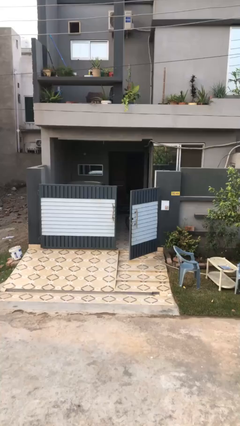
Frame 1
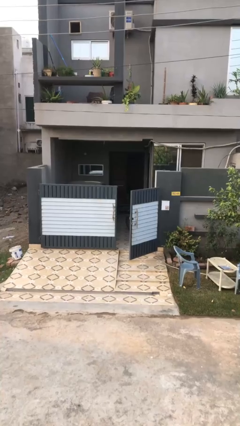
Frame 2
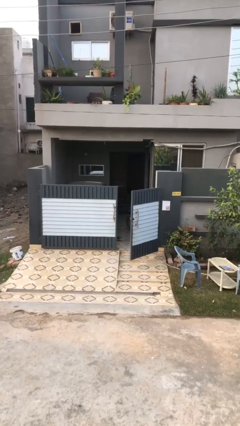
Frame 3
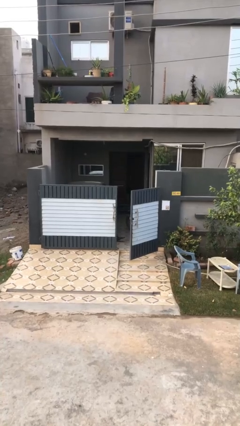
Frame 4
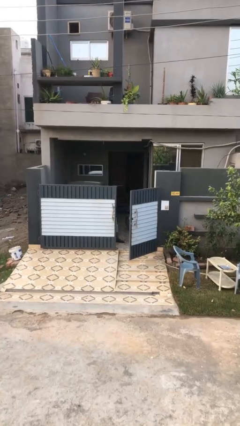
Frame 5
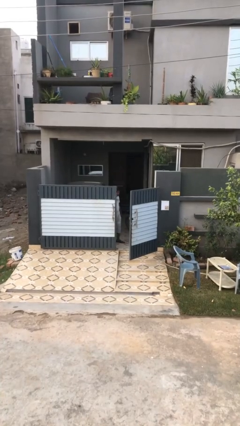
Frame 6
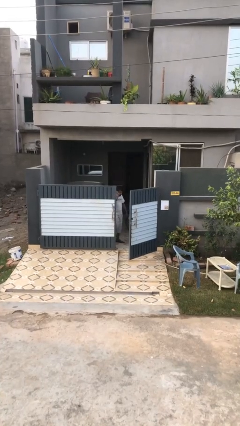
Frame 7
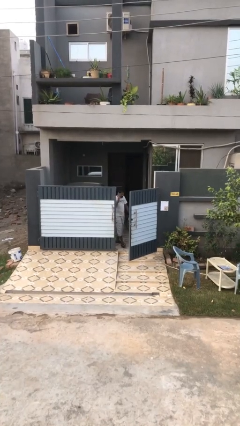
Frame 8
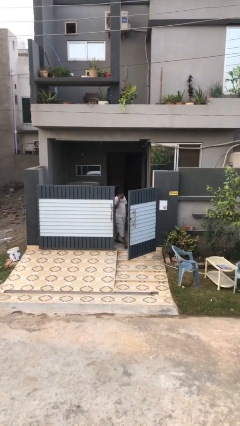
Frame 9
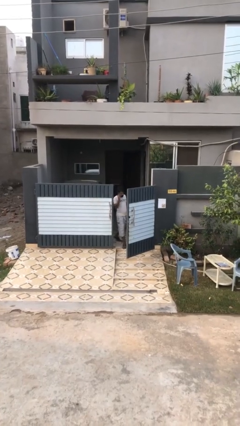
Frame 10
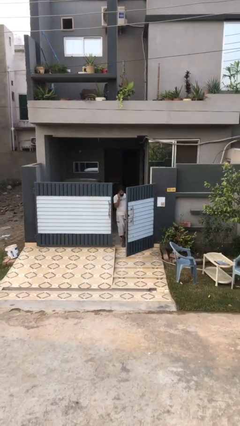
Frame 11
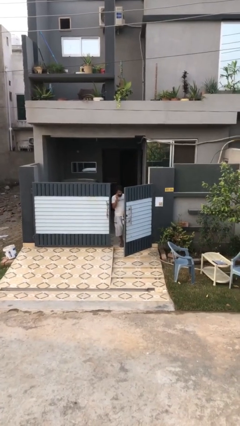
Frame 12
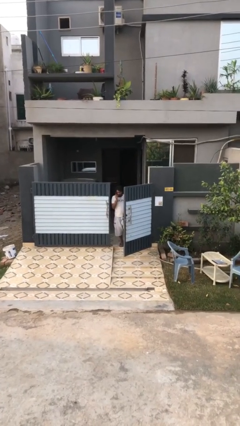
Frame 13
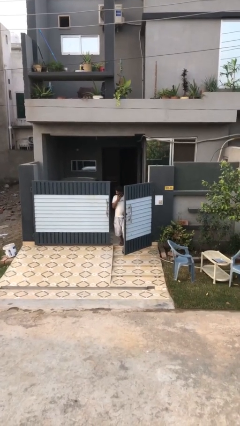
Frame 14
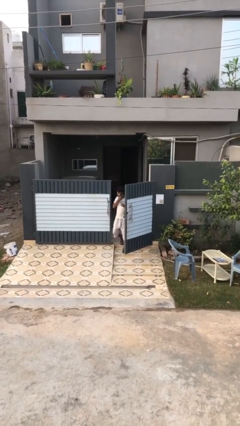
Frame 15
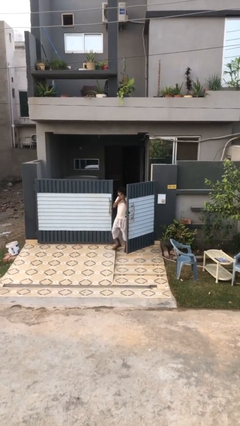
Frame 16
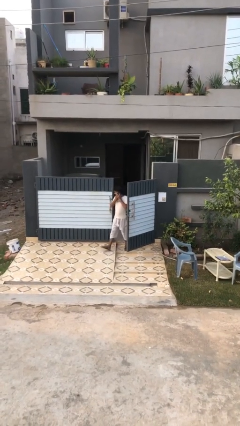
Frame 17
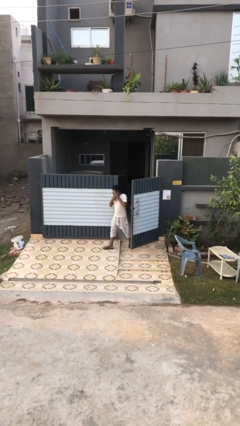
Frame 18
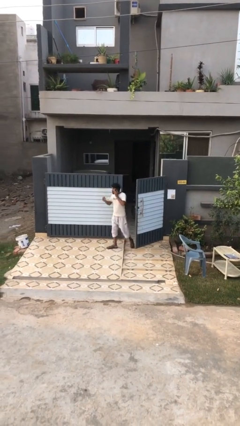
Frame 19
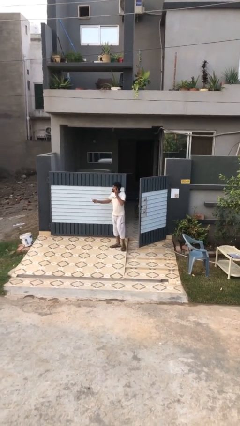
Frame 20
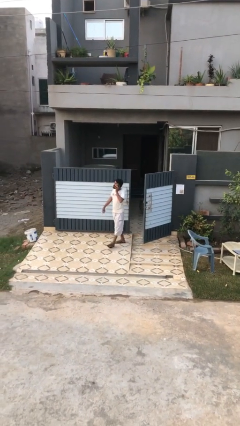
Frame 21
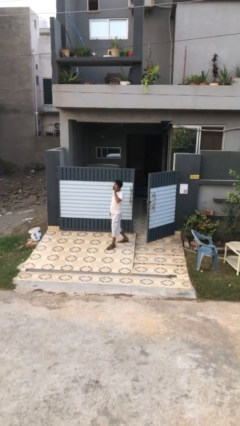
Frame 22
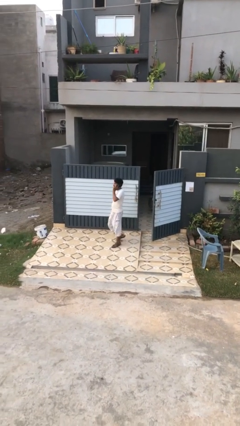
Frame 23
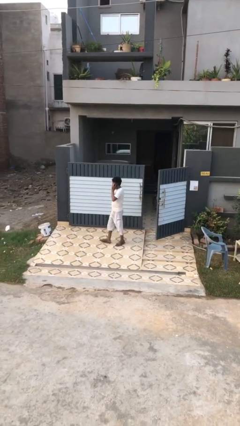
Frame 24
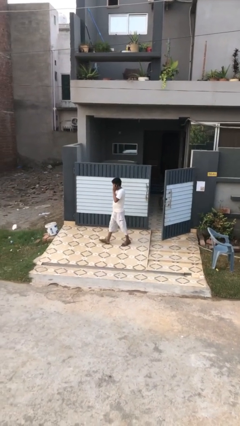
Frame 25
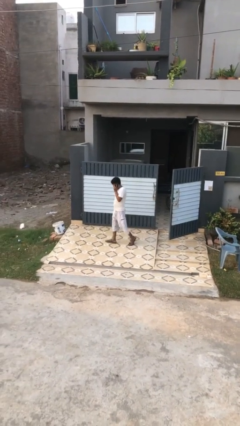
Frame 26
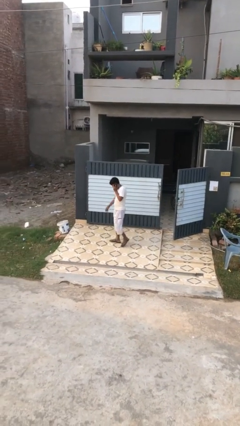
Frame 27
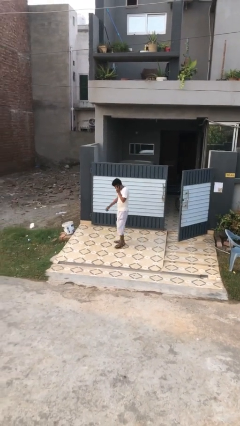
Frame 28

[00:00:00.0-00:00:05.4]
person enters scene through structure

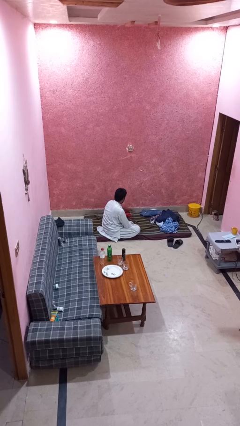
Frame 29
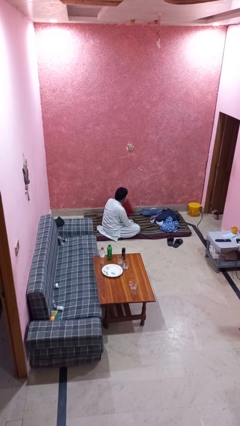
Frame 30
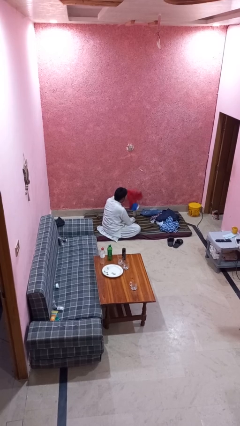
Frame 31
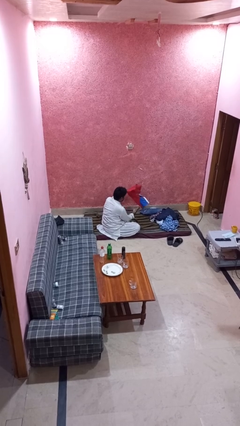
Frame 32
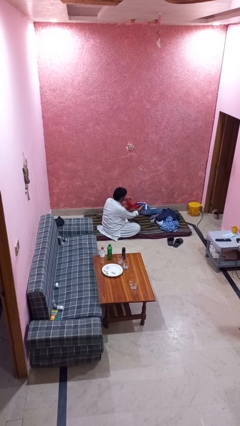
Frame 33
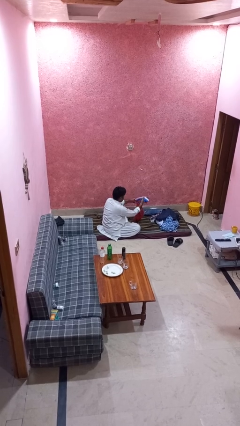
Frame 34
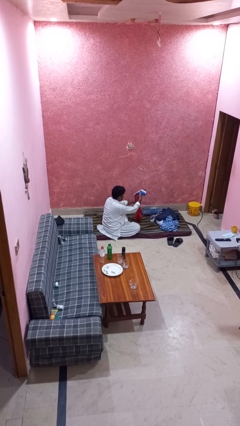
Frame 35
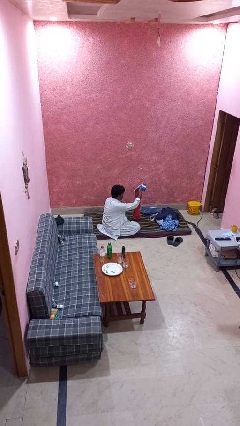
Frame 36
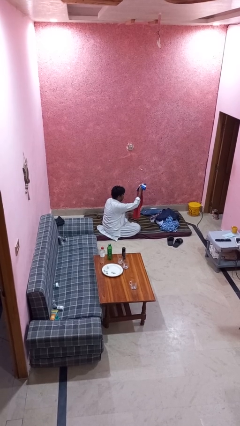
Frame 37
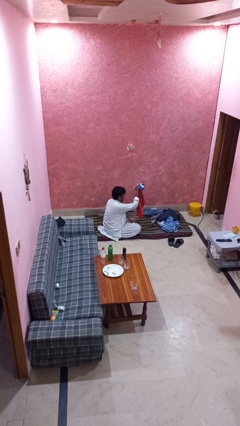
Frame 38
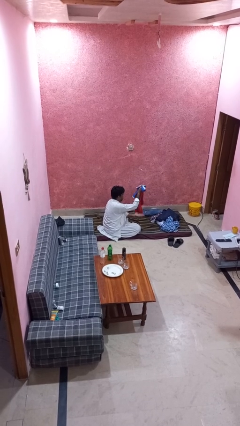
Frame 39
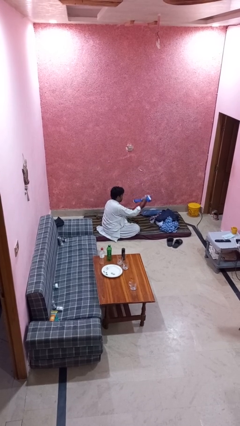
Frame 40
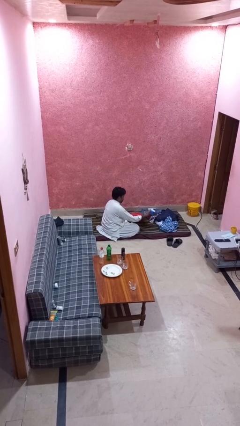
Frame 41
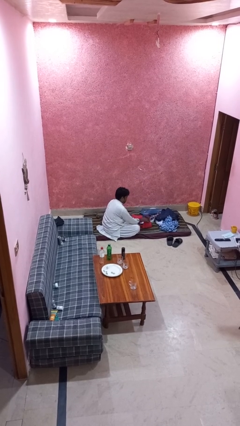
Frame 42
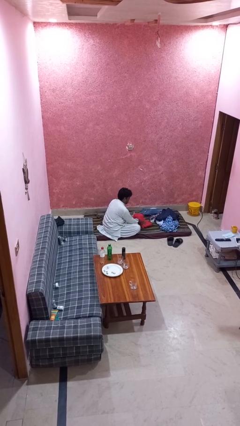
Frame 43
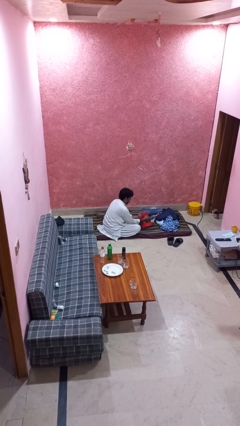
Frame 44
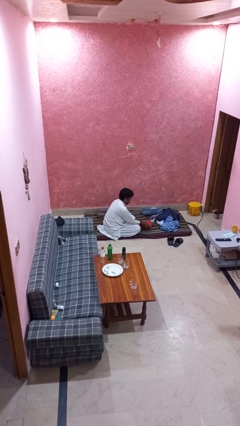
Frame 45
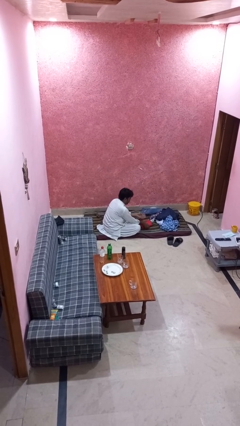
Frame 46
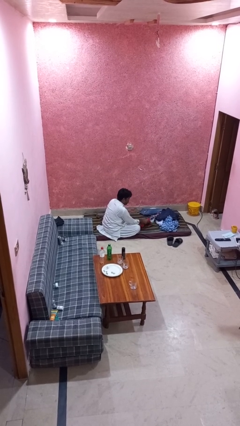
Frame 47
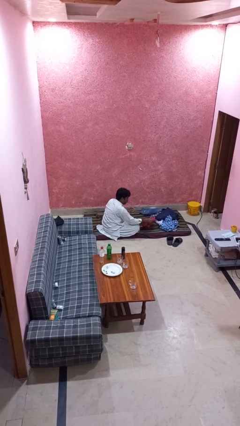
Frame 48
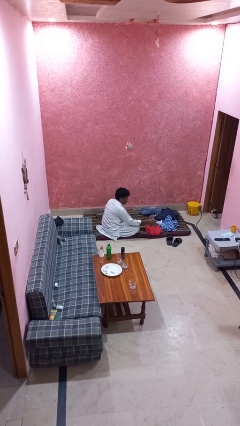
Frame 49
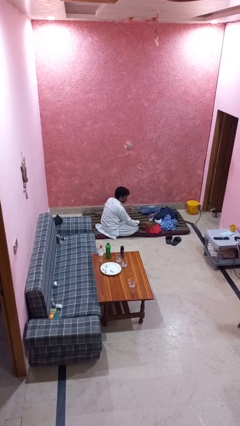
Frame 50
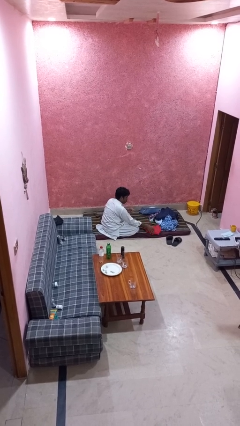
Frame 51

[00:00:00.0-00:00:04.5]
person folds shirt

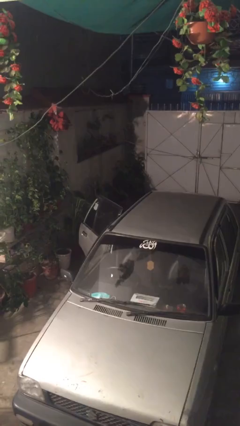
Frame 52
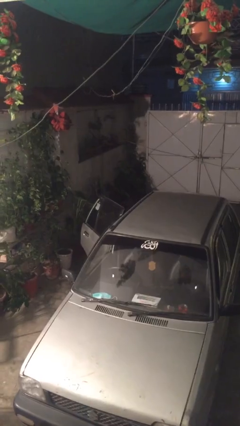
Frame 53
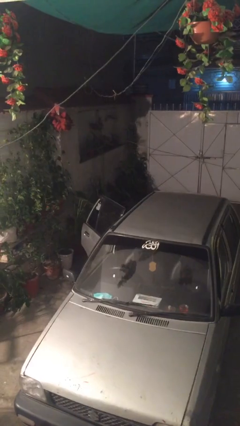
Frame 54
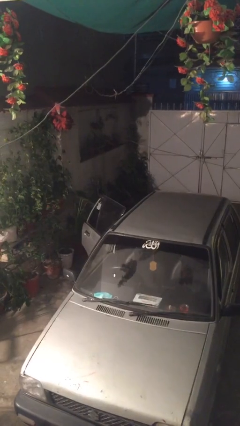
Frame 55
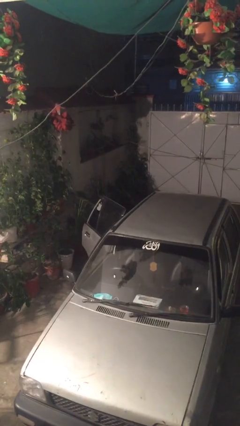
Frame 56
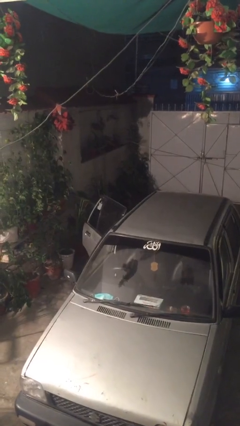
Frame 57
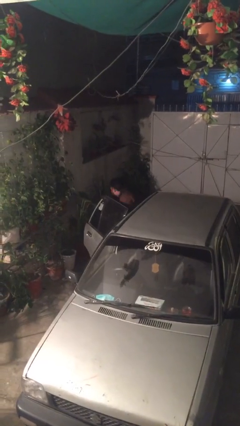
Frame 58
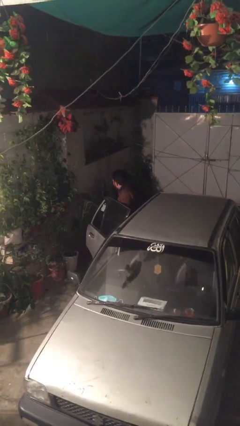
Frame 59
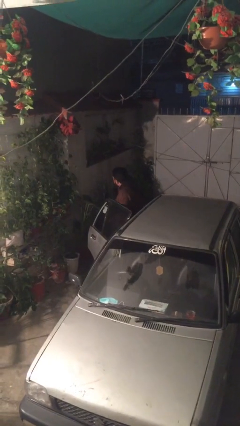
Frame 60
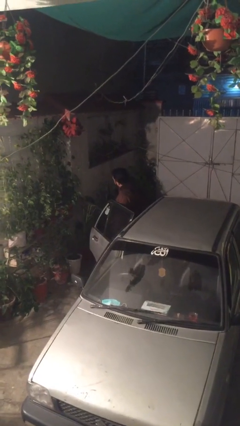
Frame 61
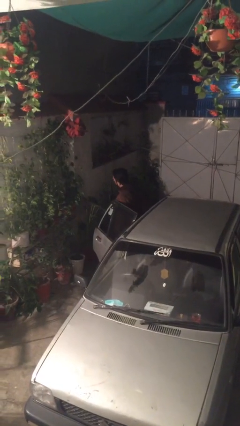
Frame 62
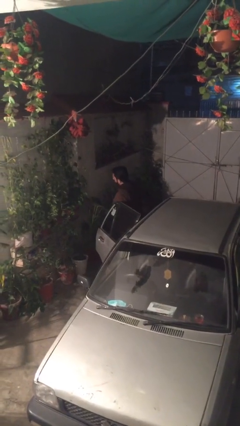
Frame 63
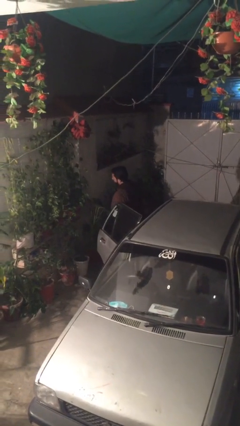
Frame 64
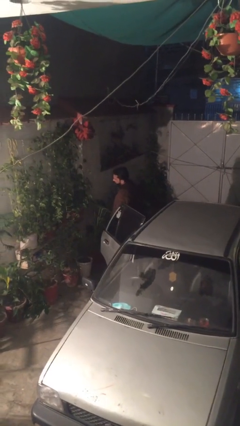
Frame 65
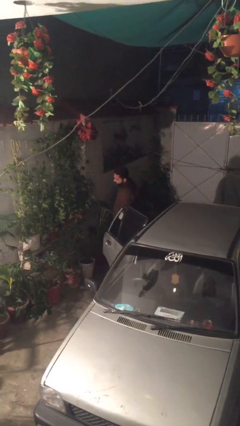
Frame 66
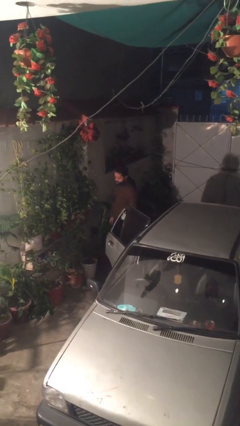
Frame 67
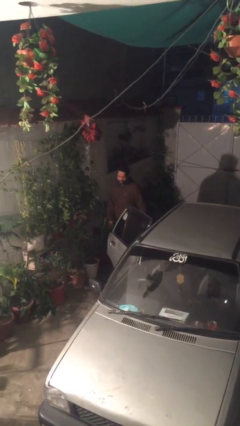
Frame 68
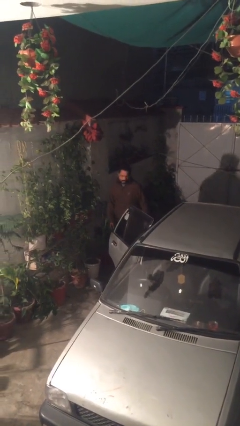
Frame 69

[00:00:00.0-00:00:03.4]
person exits car

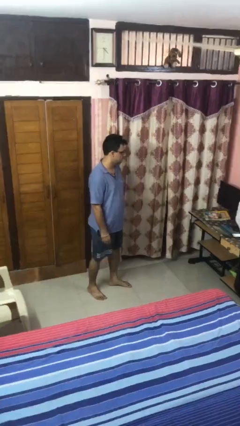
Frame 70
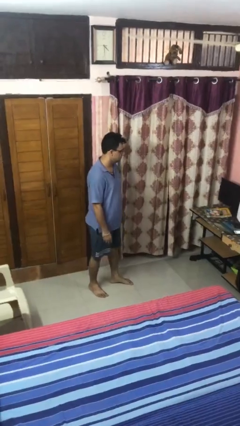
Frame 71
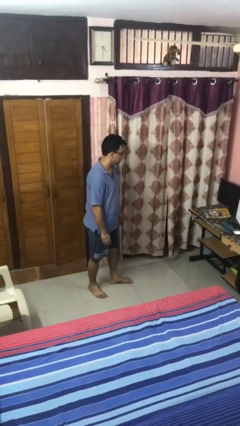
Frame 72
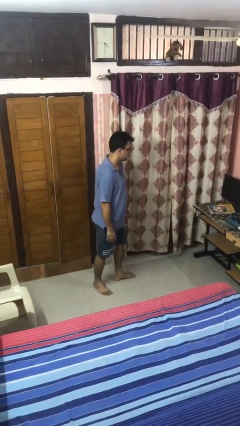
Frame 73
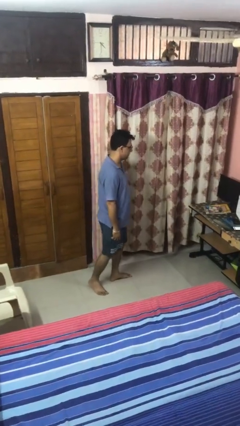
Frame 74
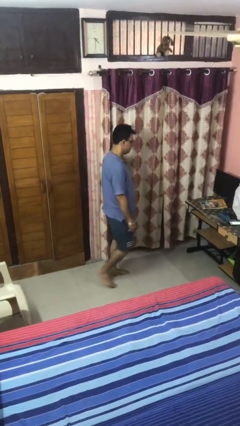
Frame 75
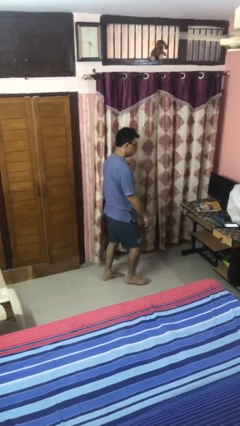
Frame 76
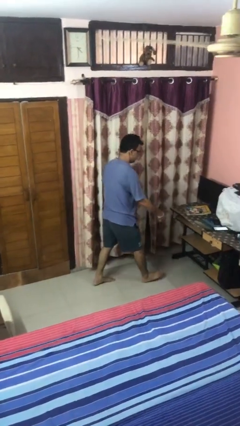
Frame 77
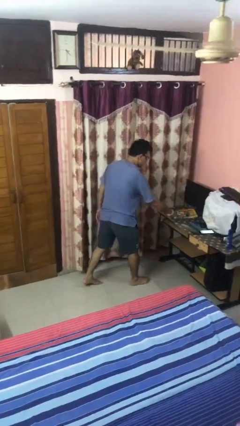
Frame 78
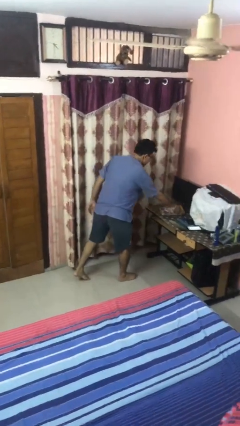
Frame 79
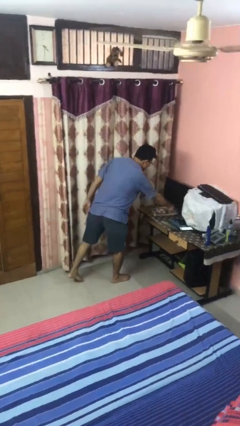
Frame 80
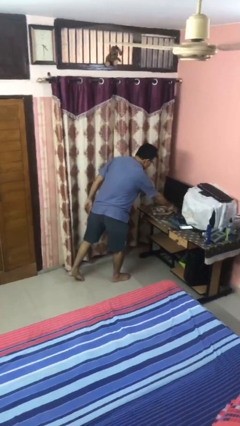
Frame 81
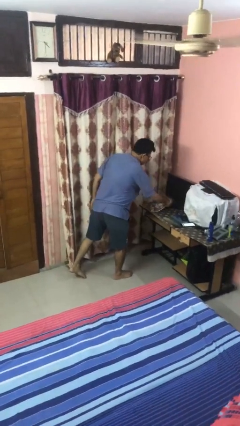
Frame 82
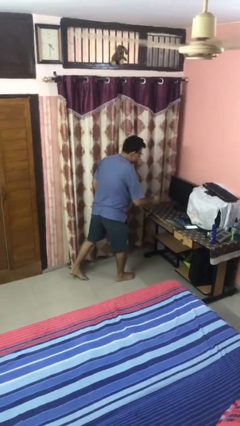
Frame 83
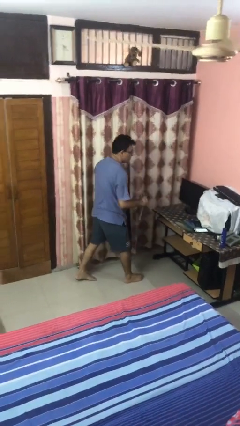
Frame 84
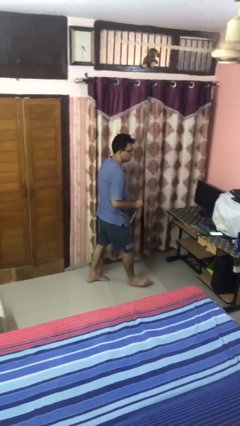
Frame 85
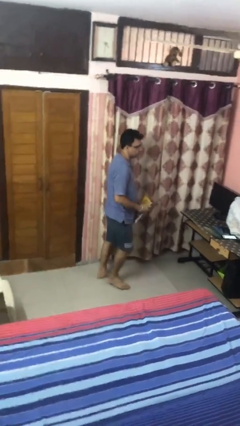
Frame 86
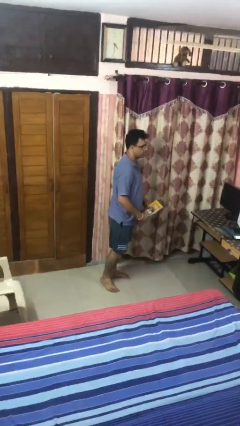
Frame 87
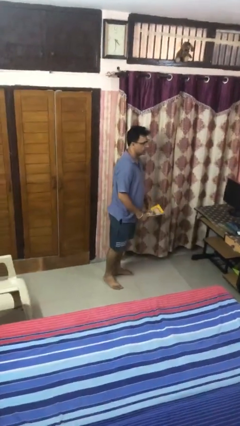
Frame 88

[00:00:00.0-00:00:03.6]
person picks up object from table

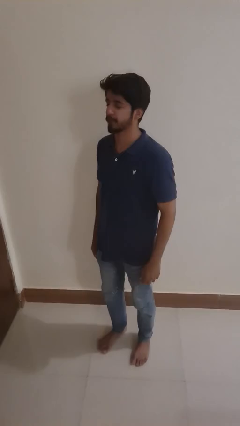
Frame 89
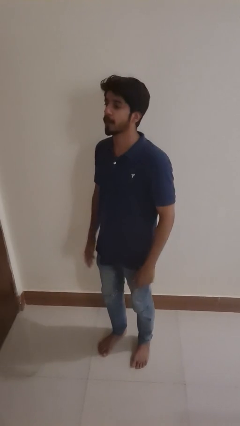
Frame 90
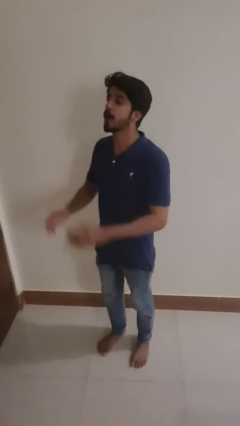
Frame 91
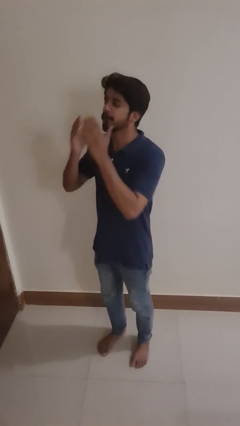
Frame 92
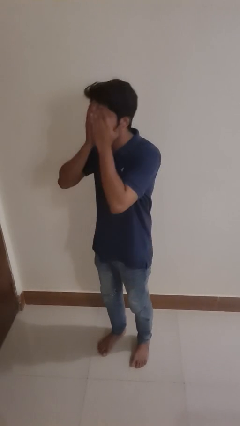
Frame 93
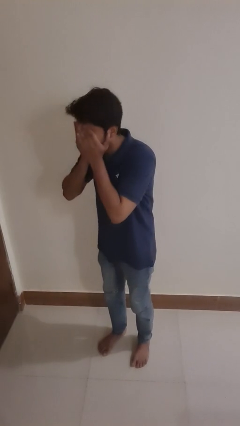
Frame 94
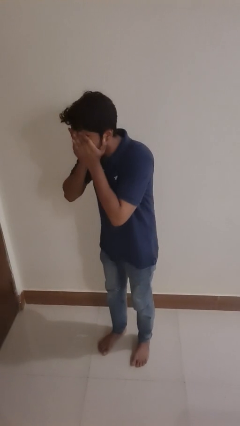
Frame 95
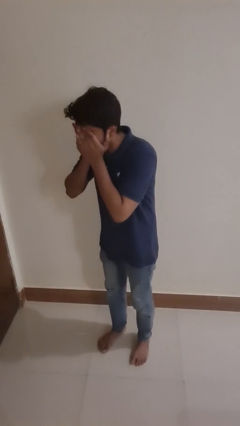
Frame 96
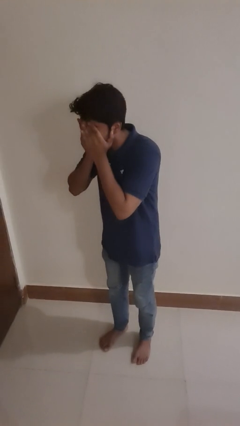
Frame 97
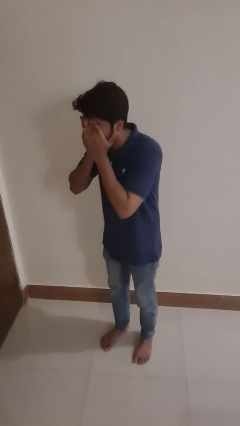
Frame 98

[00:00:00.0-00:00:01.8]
person sneezes into hand
